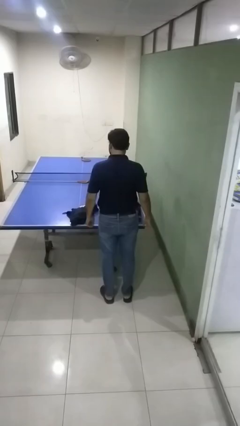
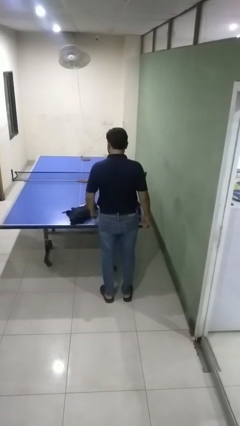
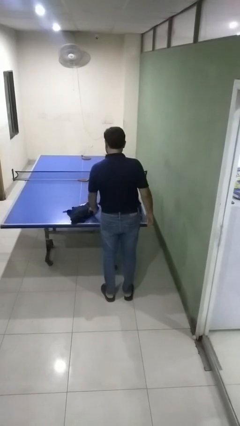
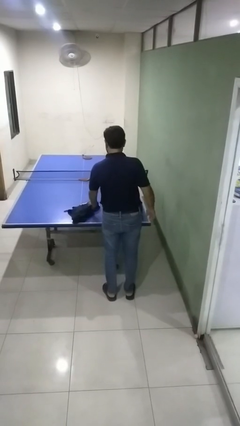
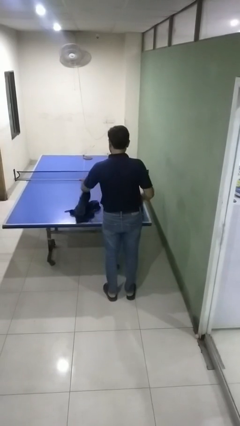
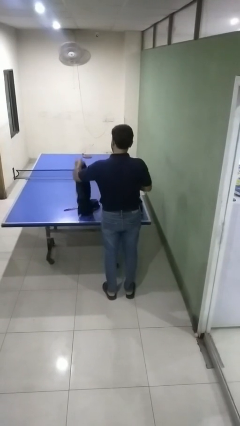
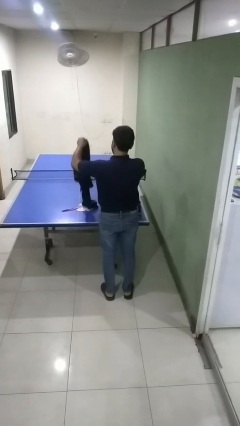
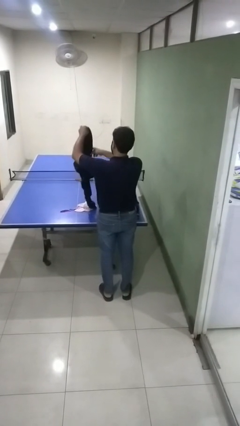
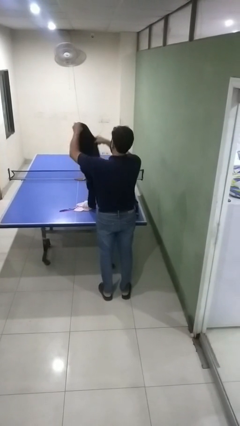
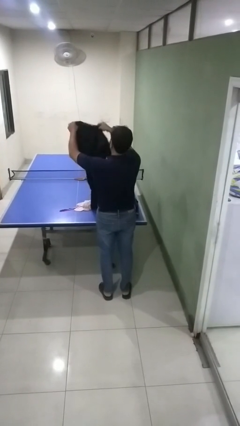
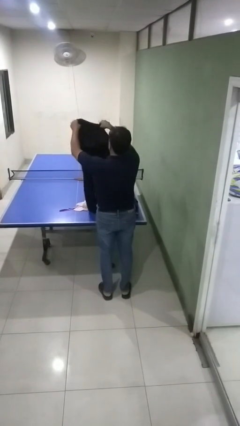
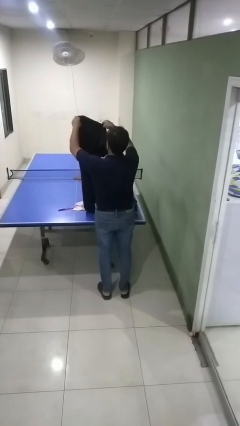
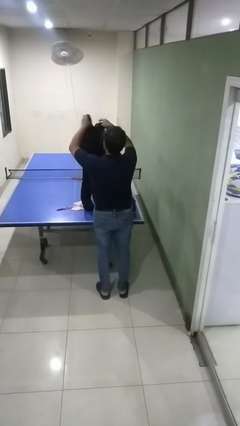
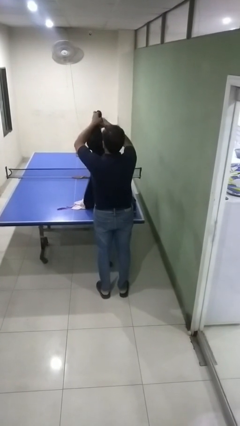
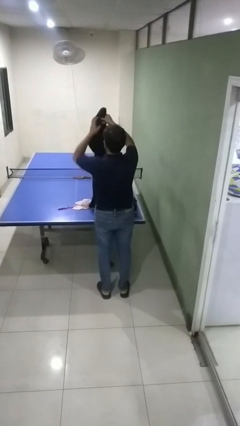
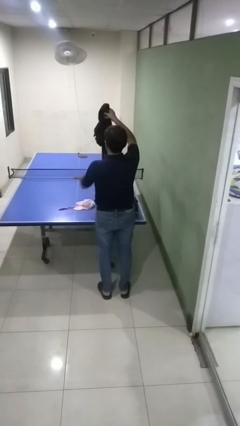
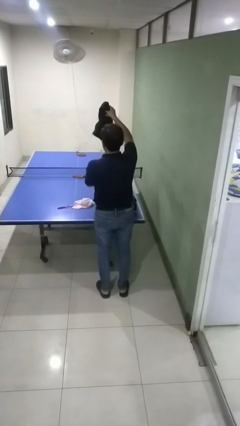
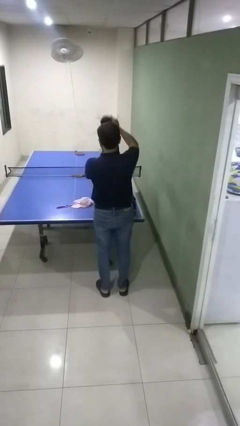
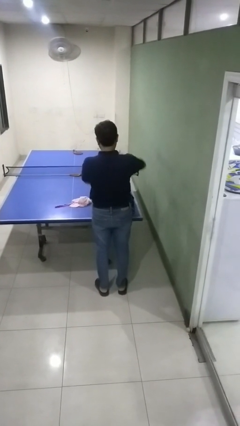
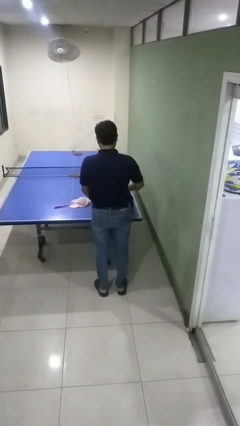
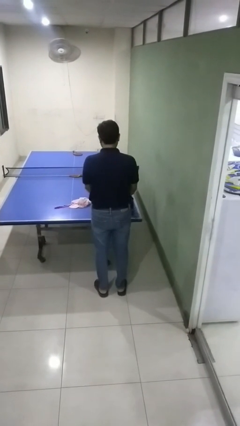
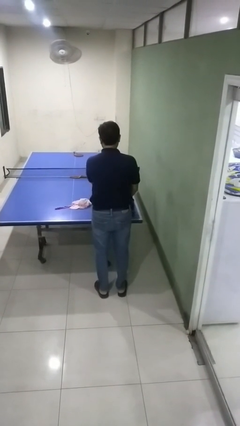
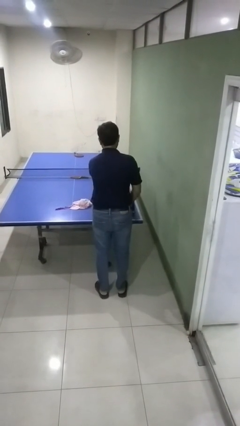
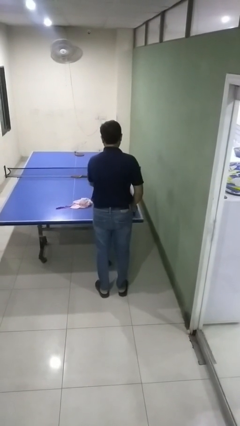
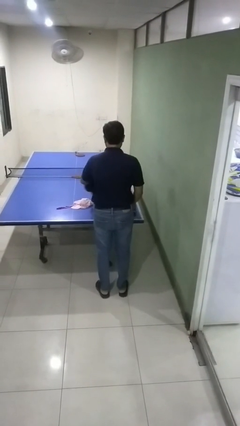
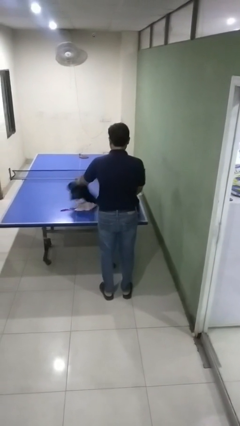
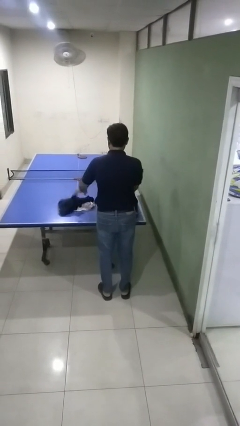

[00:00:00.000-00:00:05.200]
person folds pants

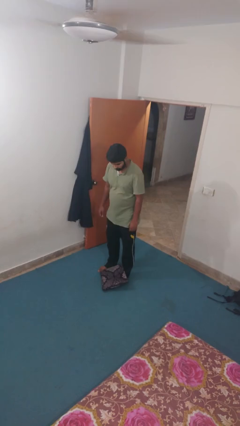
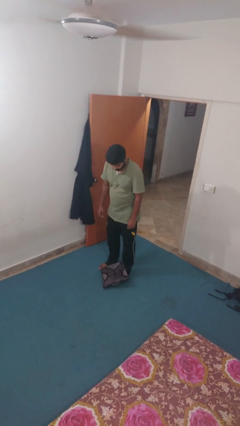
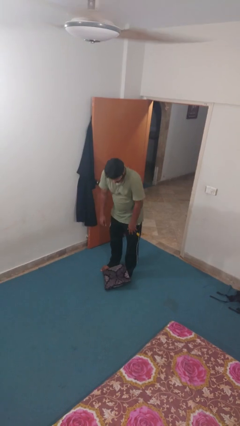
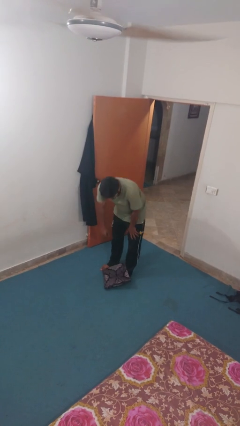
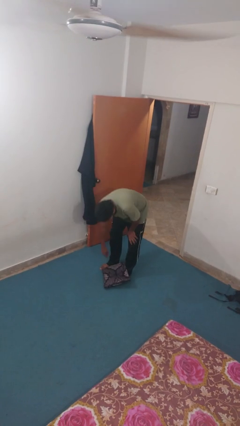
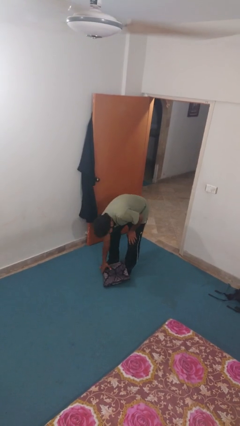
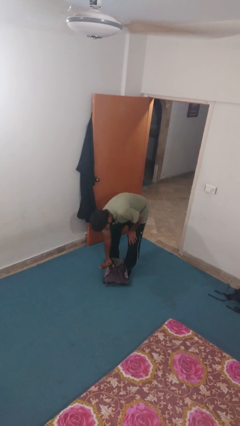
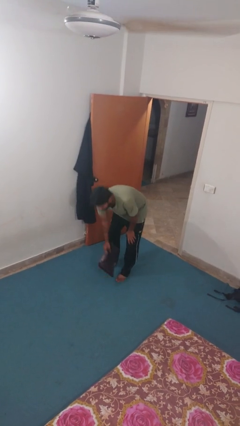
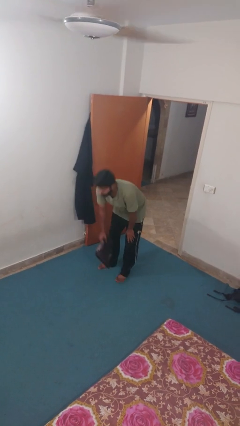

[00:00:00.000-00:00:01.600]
person picks up object from floor

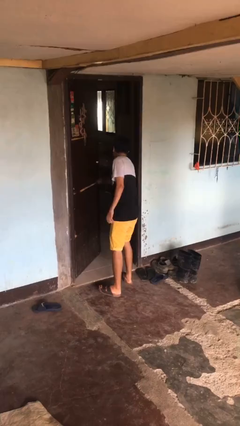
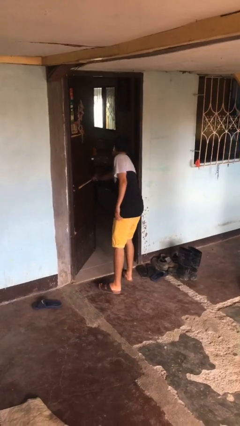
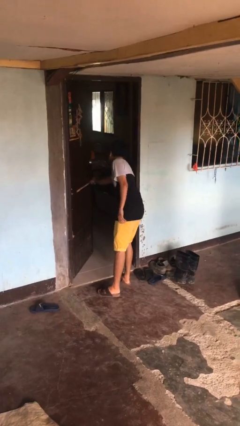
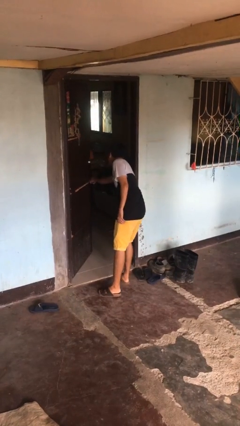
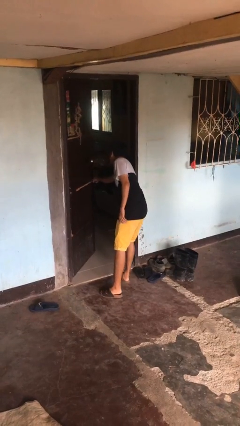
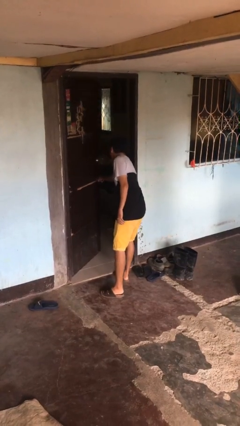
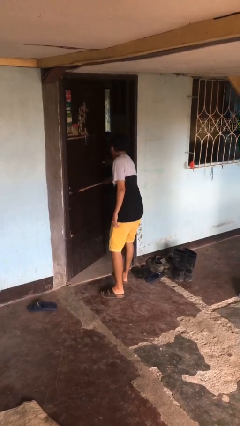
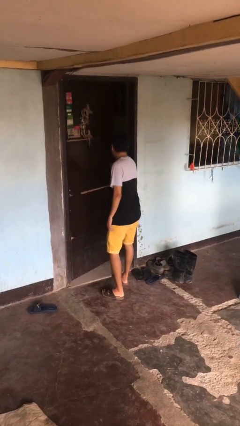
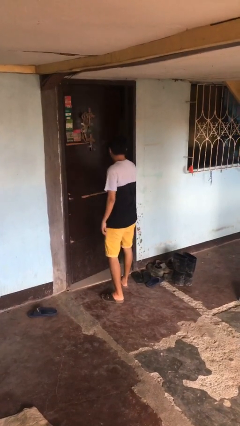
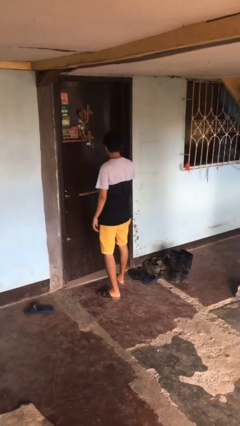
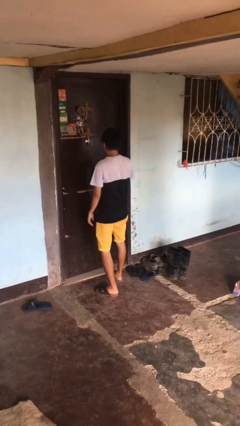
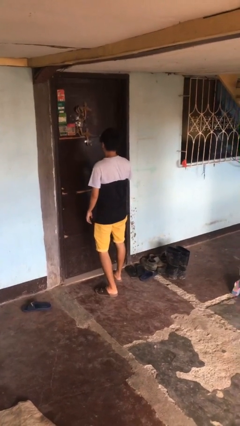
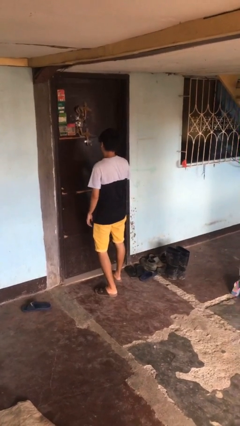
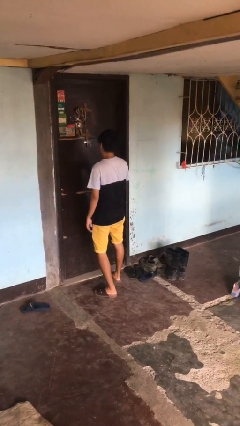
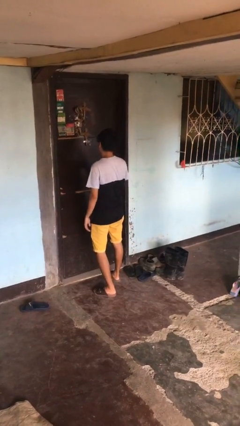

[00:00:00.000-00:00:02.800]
person closes facility door

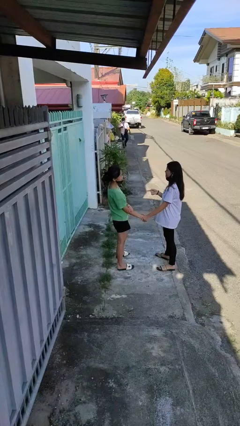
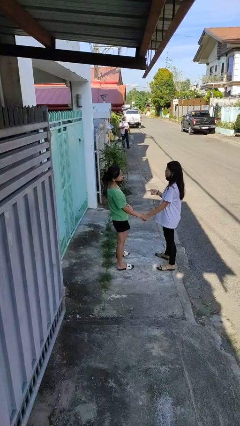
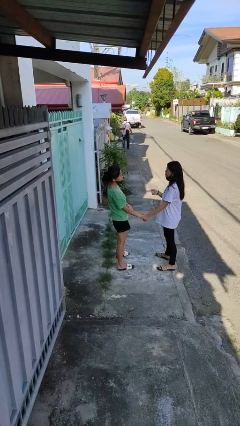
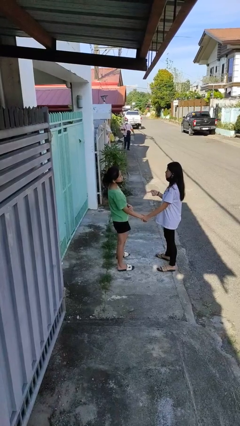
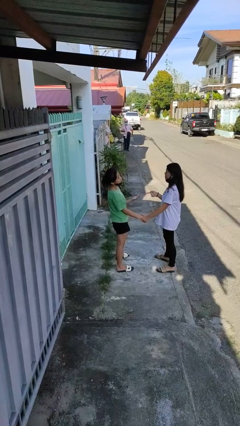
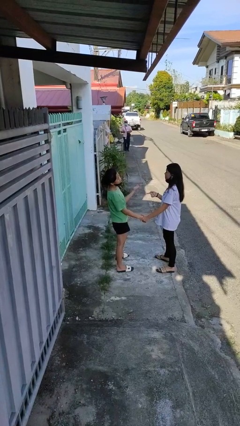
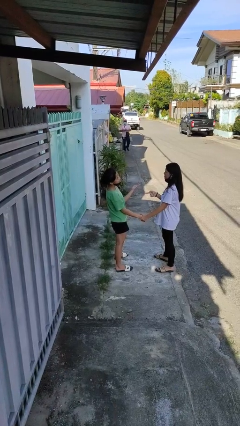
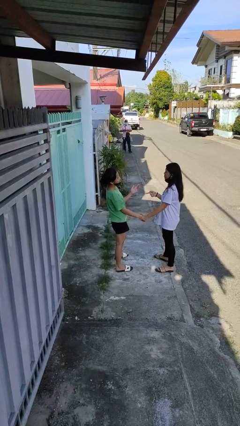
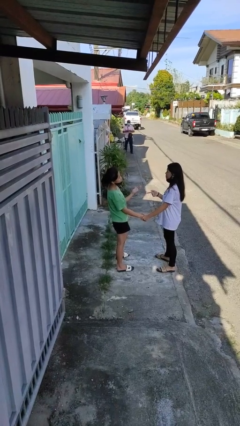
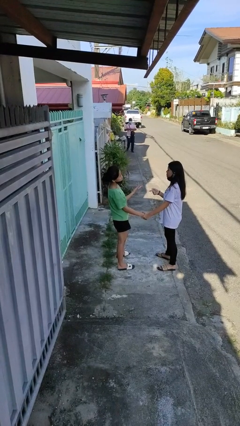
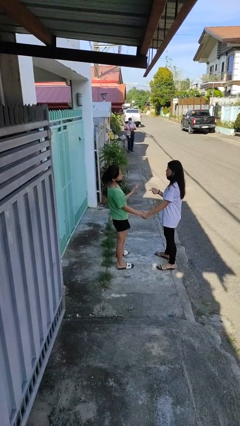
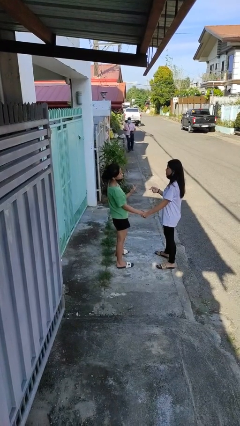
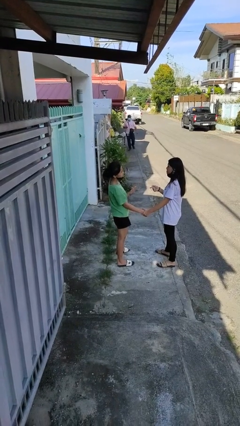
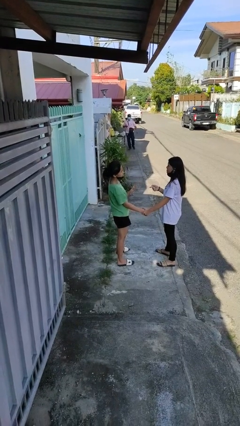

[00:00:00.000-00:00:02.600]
person talks to person

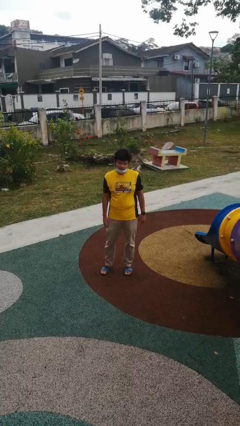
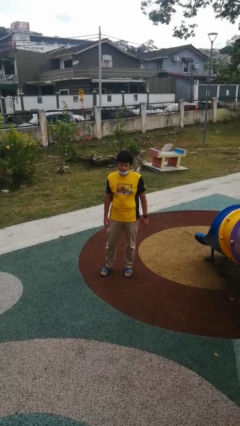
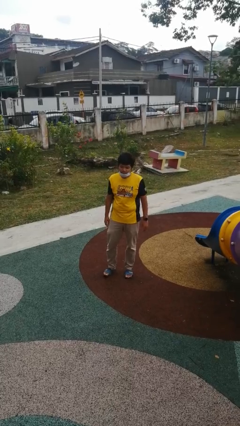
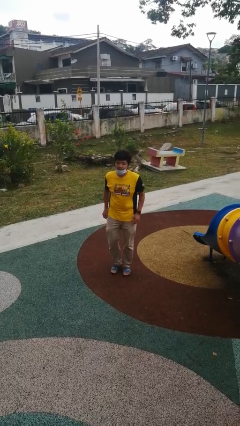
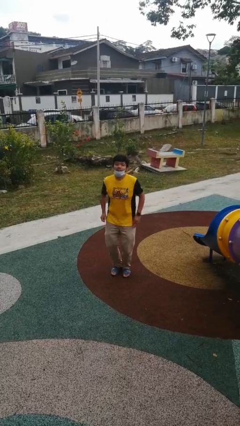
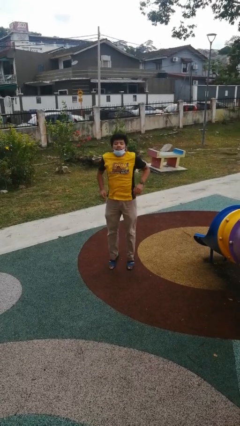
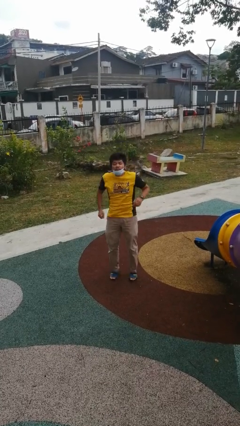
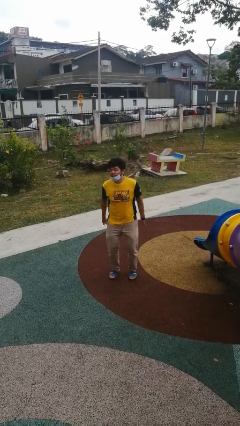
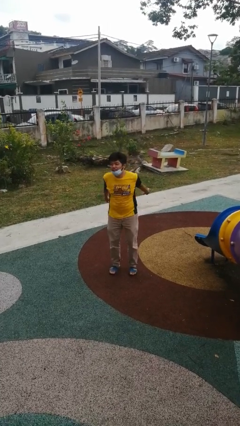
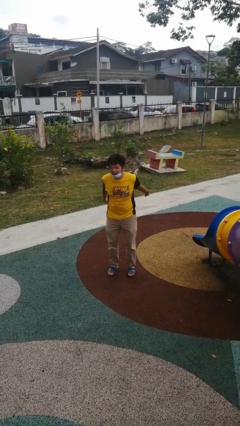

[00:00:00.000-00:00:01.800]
person jumps

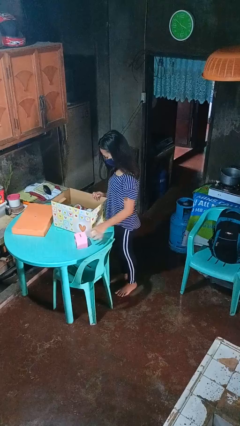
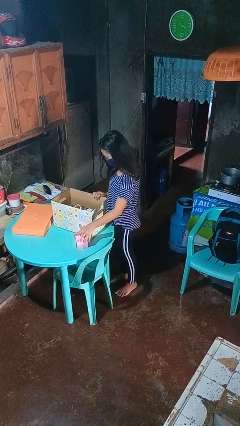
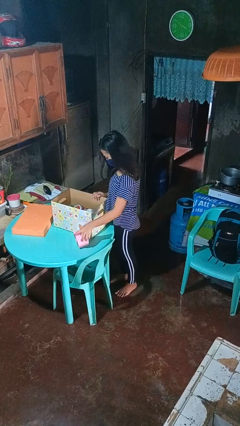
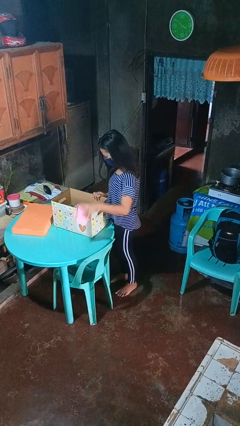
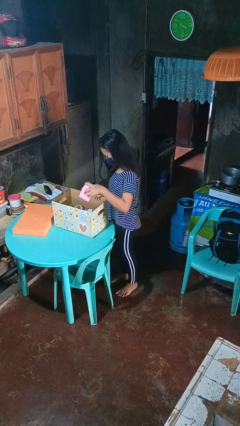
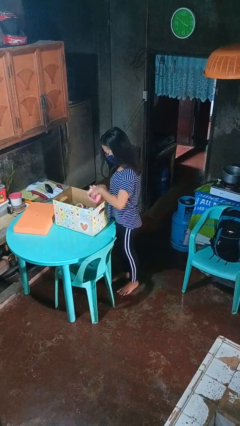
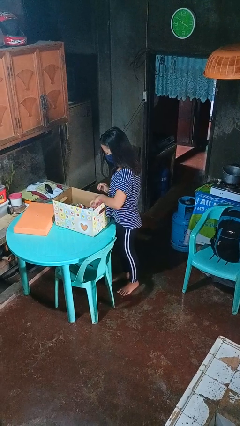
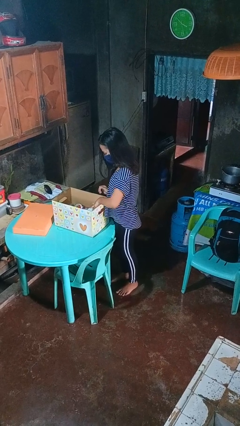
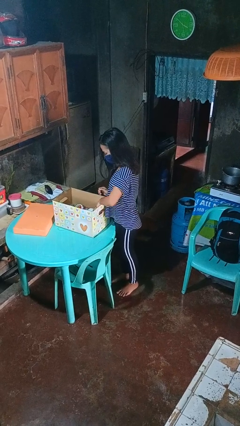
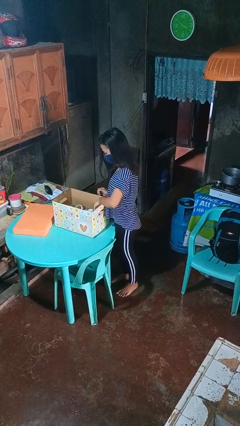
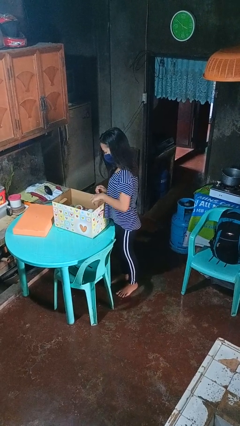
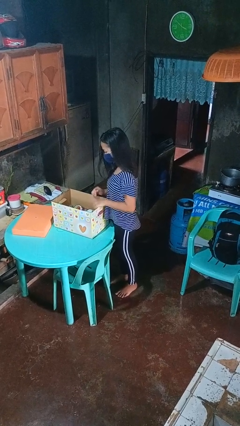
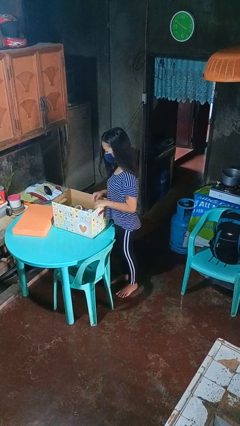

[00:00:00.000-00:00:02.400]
person puts object into box

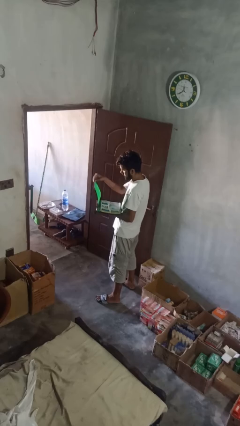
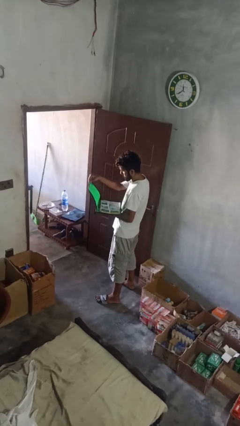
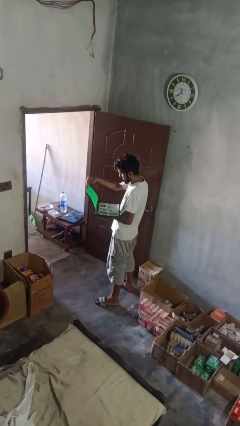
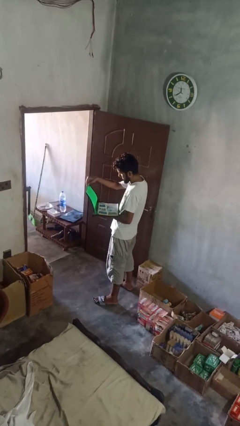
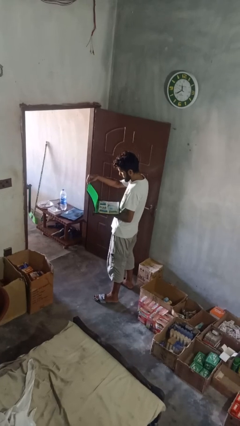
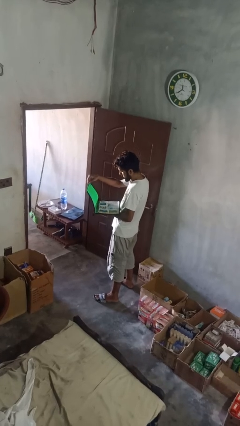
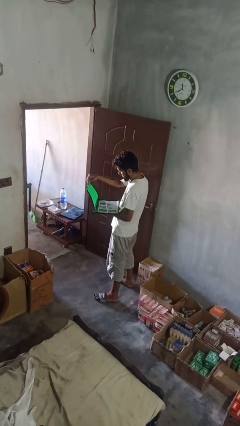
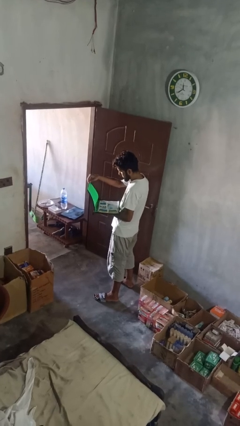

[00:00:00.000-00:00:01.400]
person opens laptop
